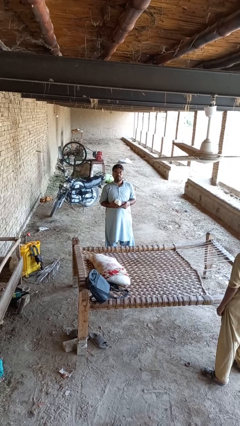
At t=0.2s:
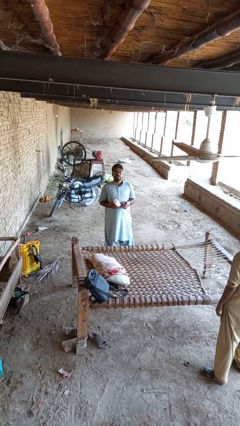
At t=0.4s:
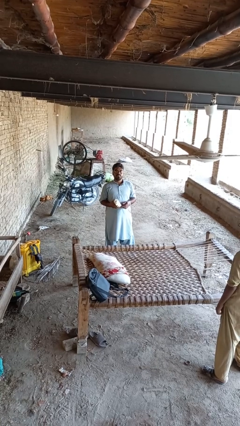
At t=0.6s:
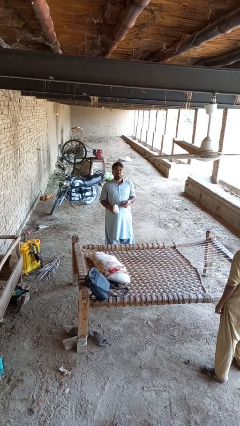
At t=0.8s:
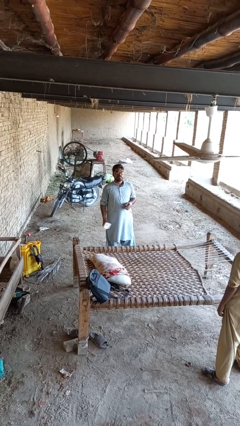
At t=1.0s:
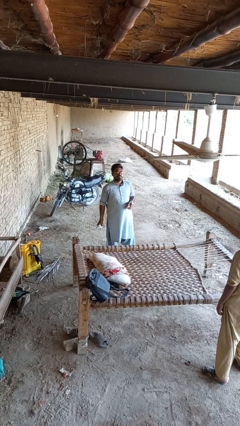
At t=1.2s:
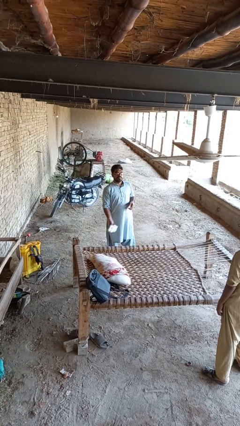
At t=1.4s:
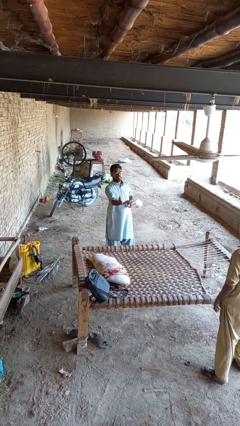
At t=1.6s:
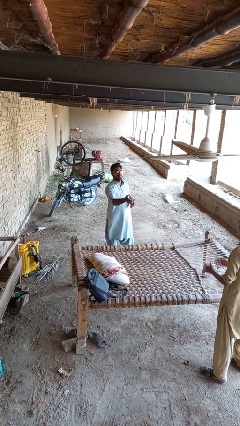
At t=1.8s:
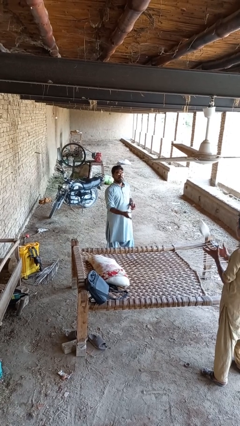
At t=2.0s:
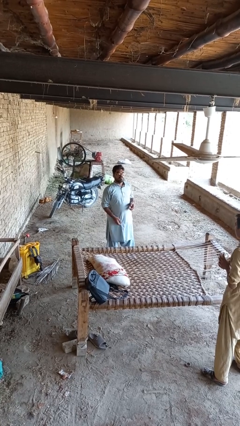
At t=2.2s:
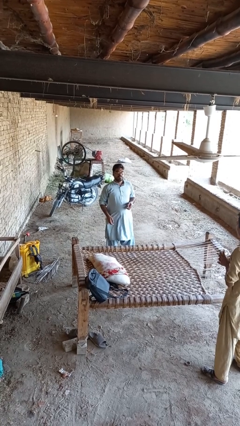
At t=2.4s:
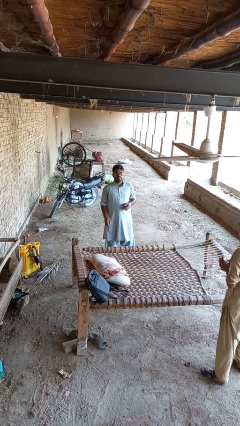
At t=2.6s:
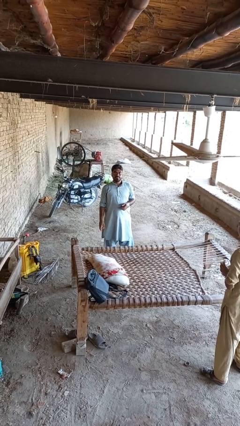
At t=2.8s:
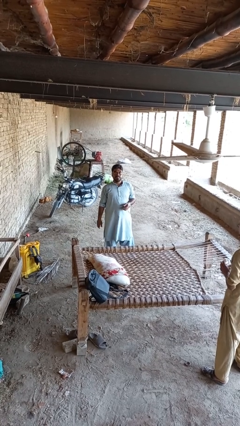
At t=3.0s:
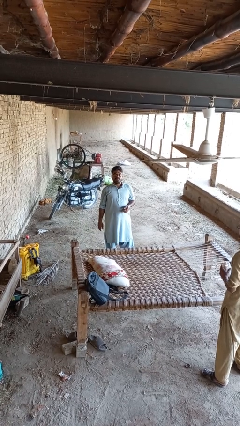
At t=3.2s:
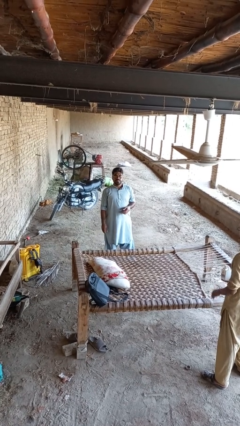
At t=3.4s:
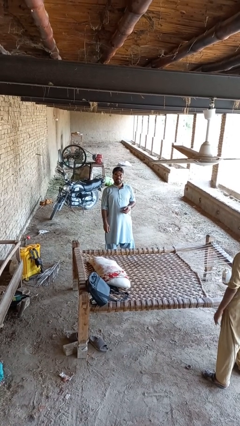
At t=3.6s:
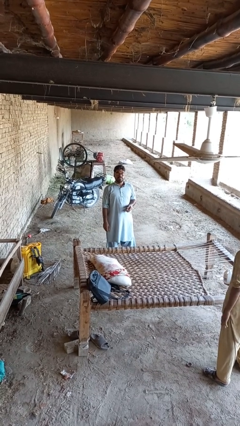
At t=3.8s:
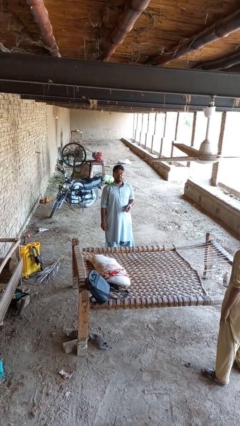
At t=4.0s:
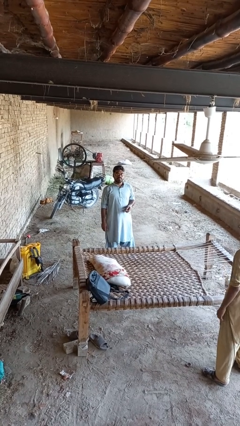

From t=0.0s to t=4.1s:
person throws object to person

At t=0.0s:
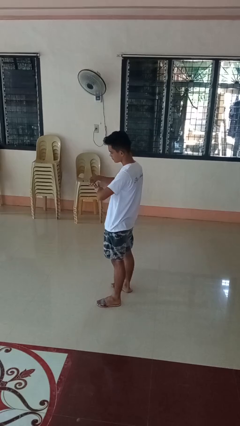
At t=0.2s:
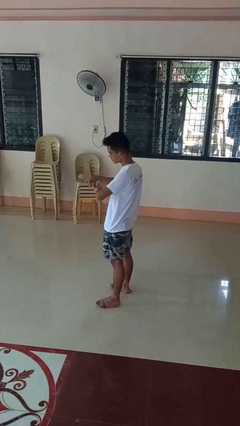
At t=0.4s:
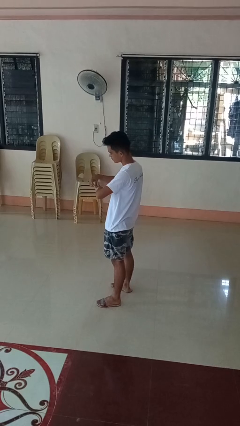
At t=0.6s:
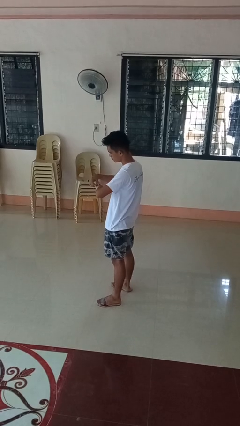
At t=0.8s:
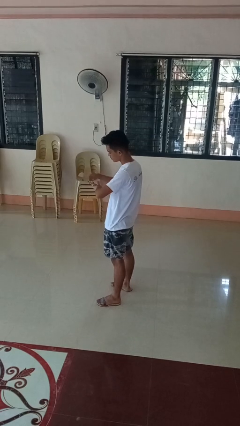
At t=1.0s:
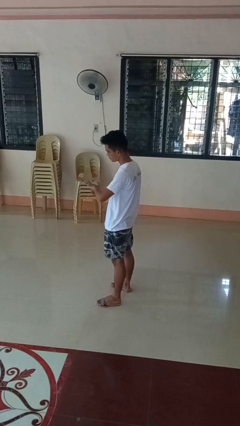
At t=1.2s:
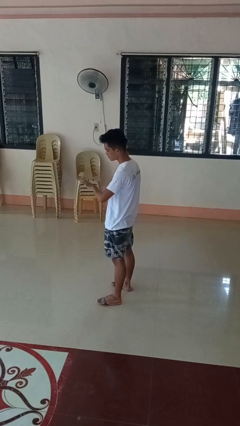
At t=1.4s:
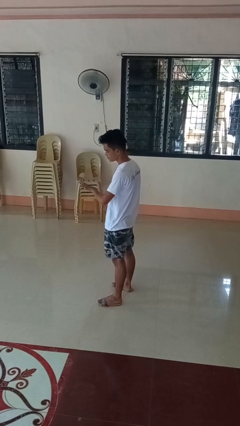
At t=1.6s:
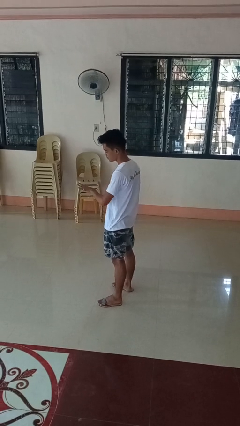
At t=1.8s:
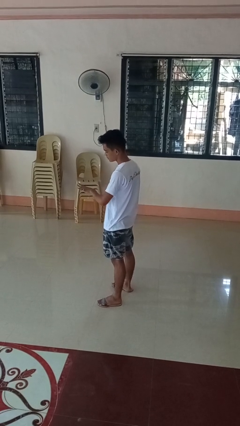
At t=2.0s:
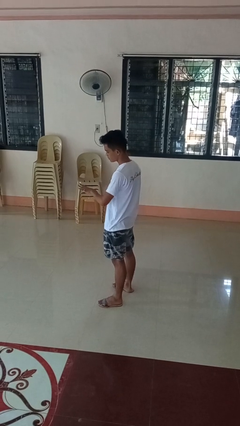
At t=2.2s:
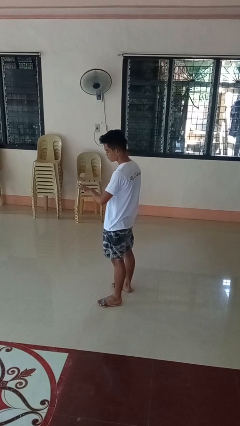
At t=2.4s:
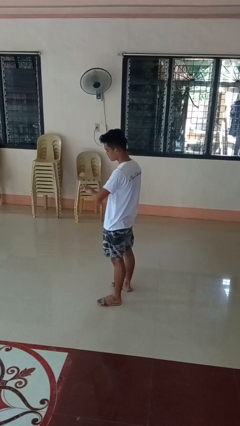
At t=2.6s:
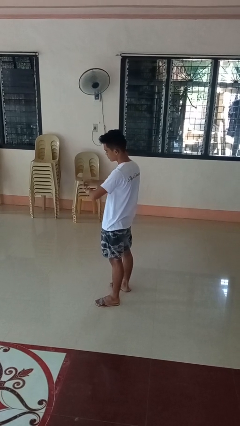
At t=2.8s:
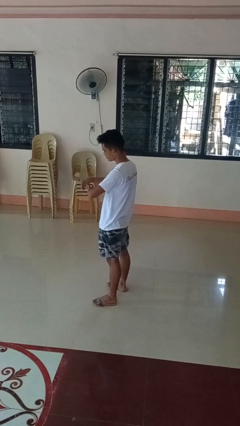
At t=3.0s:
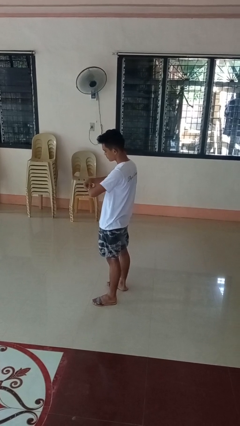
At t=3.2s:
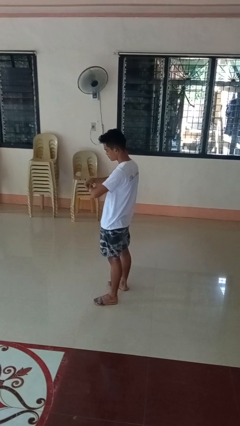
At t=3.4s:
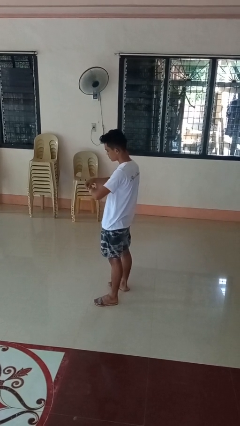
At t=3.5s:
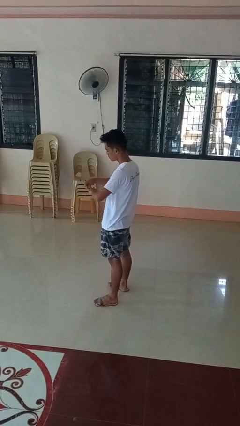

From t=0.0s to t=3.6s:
person puts on ring

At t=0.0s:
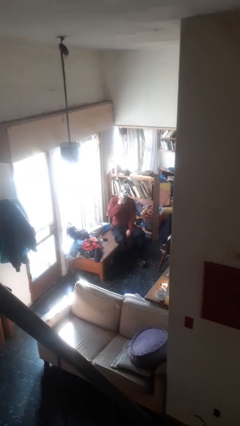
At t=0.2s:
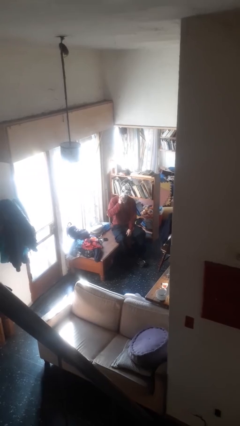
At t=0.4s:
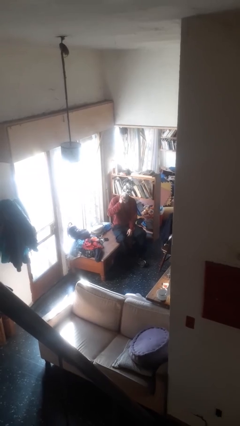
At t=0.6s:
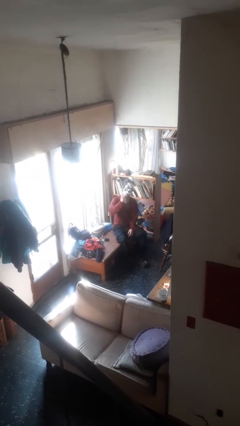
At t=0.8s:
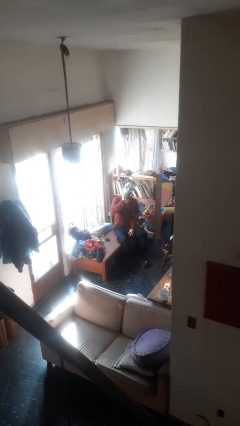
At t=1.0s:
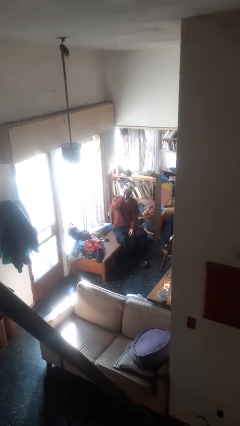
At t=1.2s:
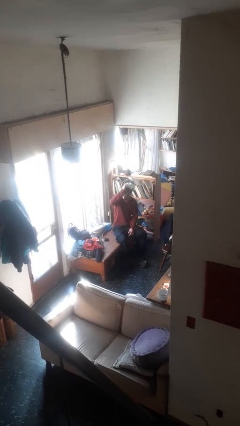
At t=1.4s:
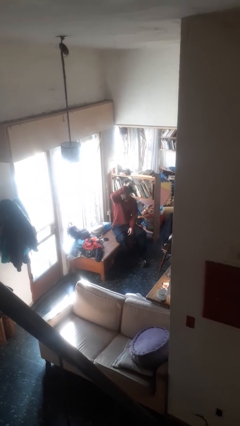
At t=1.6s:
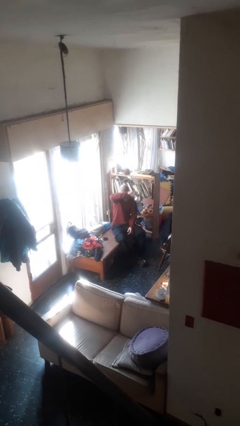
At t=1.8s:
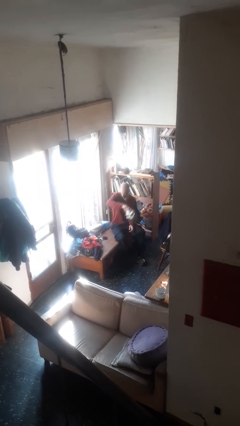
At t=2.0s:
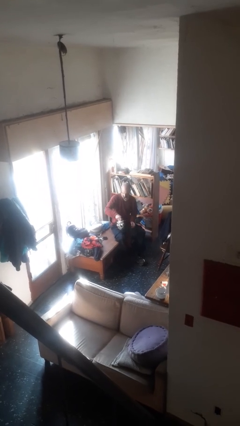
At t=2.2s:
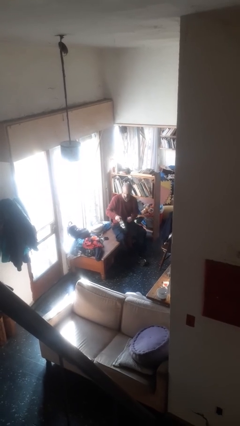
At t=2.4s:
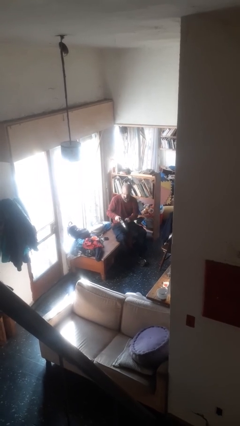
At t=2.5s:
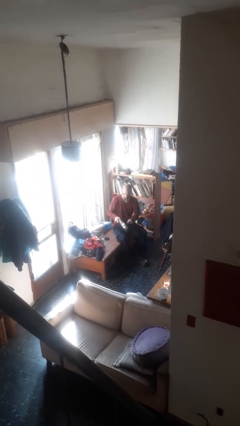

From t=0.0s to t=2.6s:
person takes off facemask

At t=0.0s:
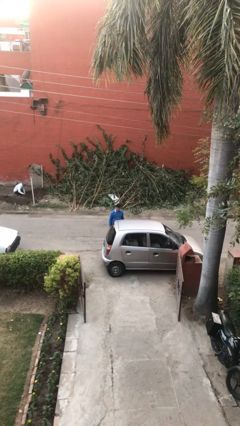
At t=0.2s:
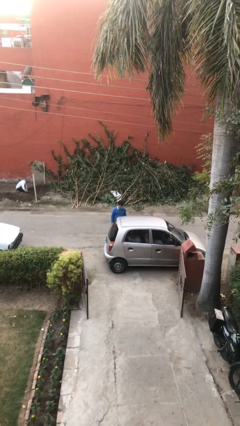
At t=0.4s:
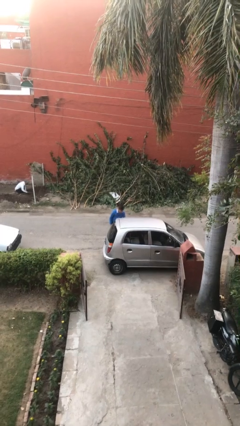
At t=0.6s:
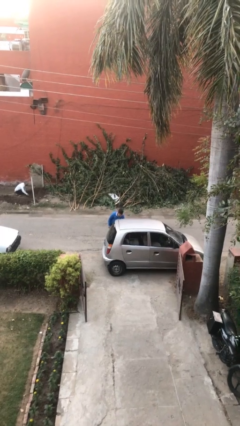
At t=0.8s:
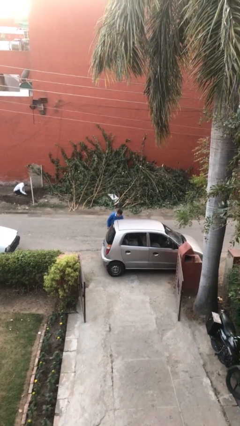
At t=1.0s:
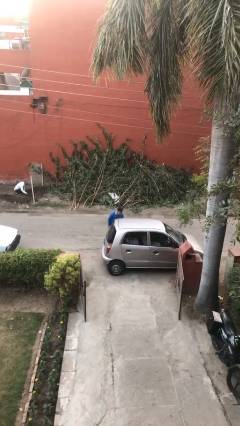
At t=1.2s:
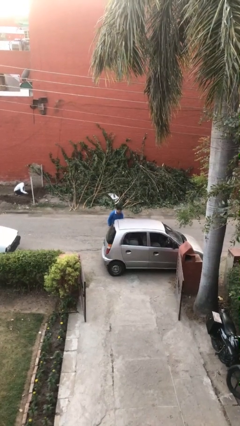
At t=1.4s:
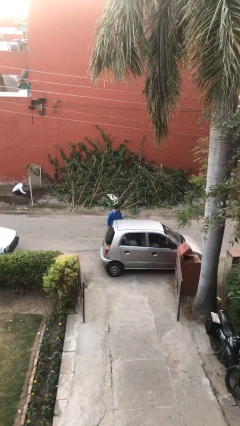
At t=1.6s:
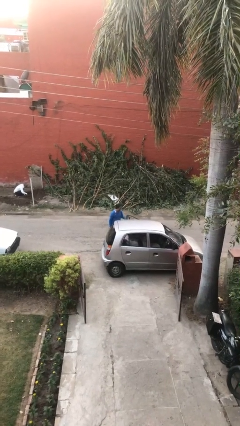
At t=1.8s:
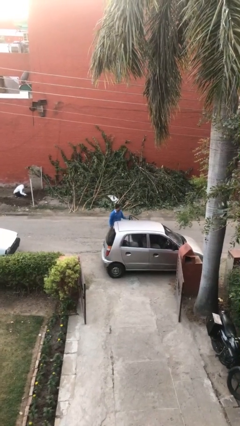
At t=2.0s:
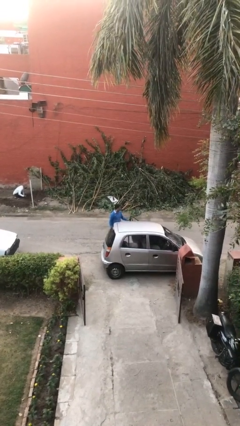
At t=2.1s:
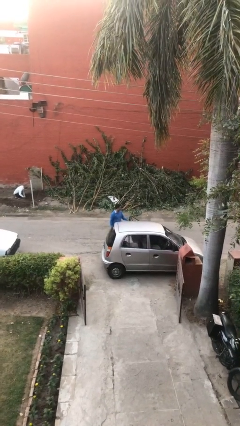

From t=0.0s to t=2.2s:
person opens car door

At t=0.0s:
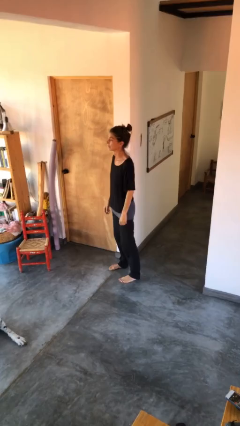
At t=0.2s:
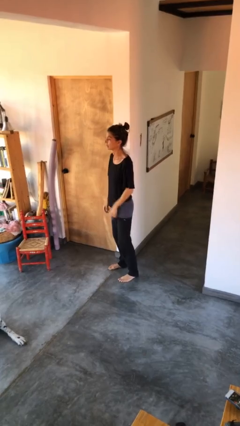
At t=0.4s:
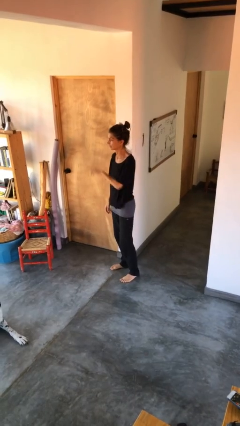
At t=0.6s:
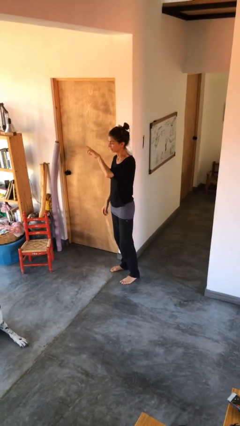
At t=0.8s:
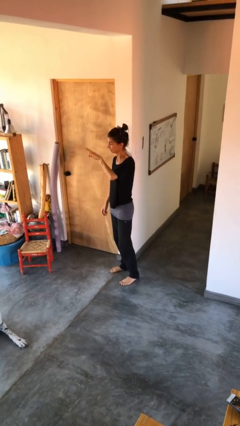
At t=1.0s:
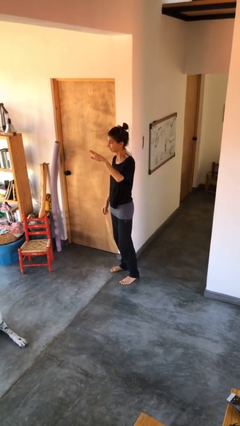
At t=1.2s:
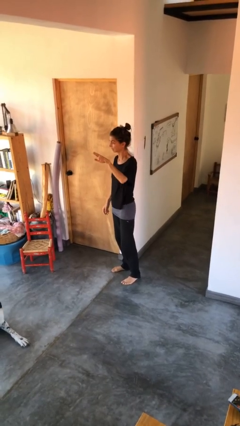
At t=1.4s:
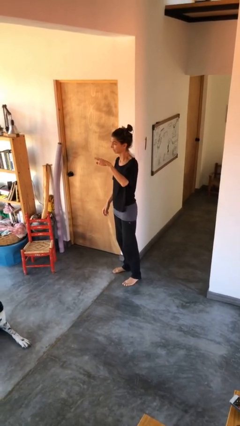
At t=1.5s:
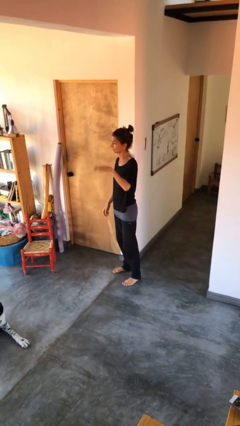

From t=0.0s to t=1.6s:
person gestures swipe left

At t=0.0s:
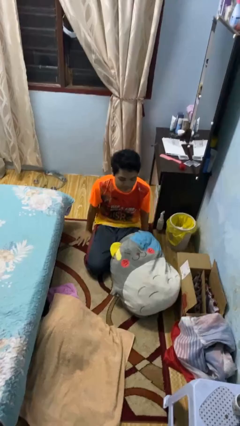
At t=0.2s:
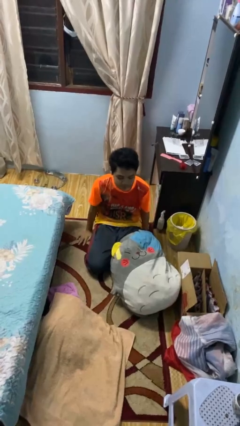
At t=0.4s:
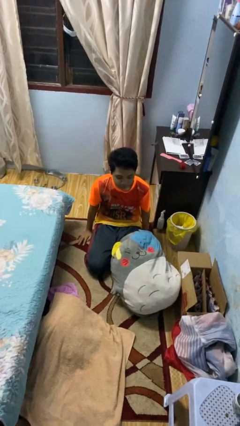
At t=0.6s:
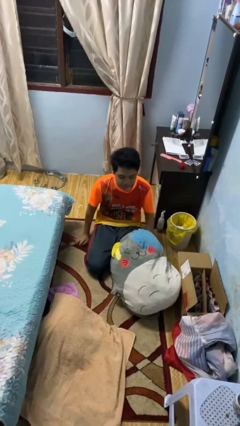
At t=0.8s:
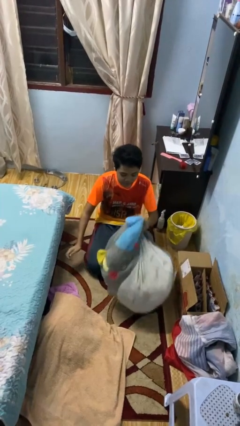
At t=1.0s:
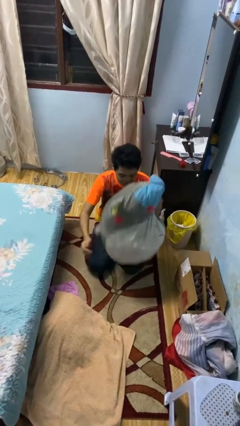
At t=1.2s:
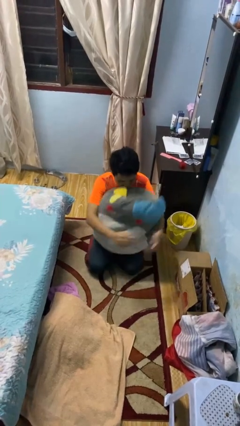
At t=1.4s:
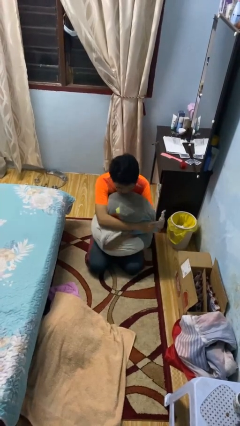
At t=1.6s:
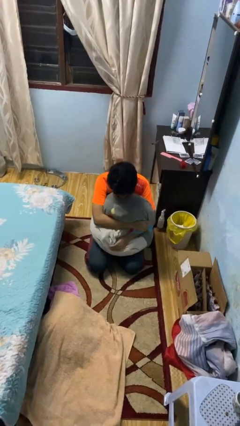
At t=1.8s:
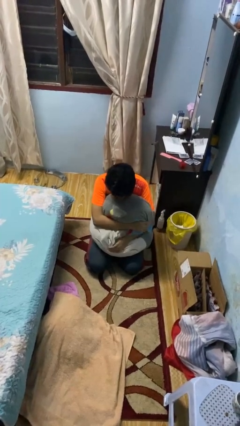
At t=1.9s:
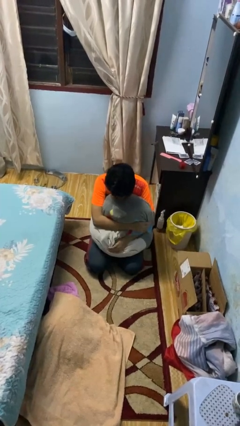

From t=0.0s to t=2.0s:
person hugs stuffed animal

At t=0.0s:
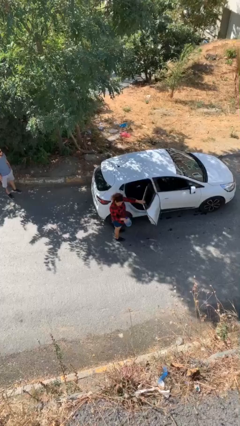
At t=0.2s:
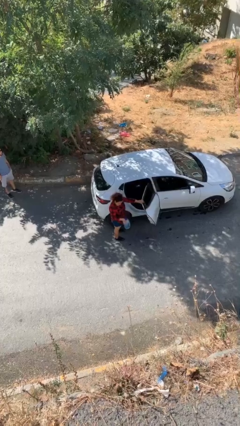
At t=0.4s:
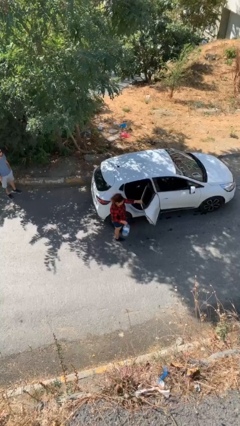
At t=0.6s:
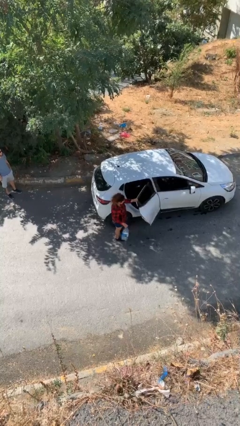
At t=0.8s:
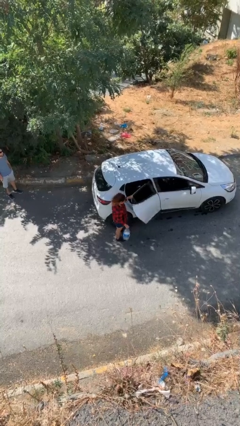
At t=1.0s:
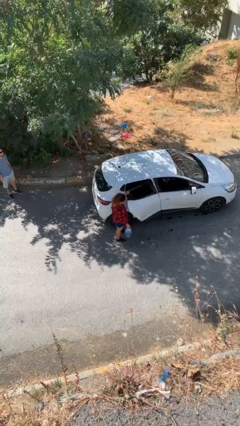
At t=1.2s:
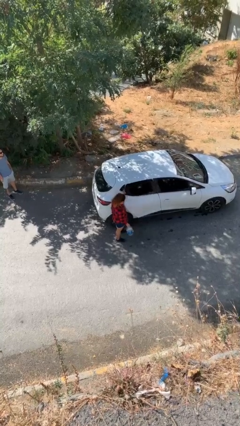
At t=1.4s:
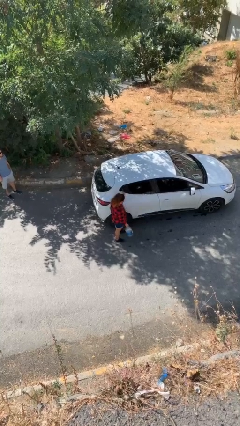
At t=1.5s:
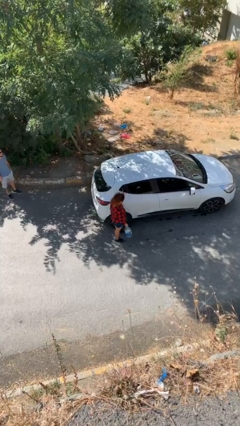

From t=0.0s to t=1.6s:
person closes car door
